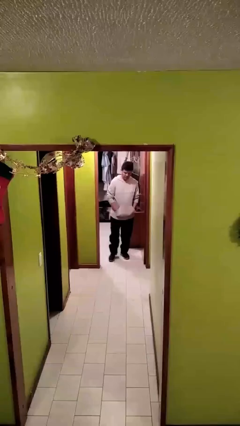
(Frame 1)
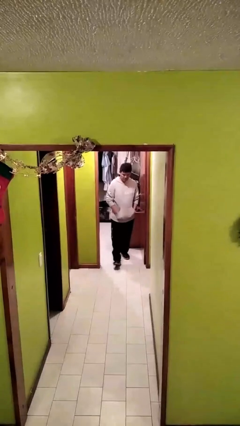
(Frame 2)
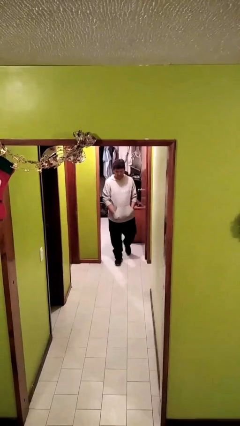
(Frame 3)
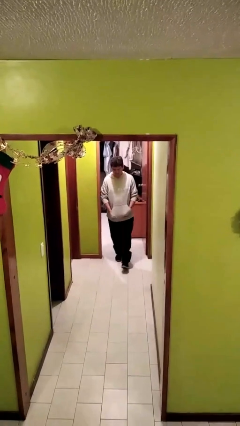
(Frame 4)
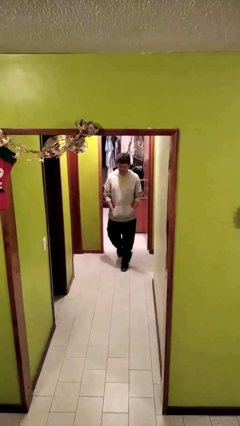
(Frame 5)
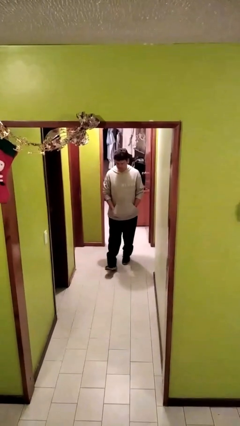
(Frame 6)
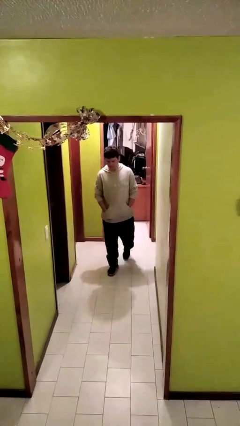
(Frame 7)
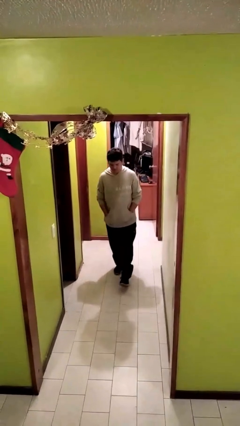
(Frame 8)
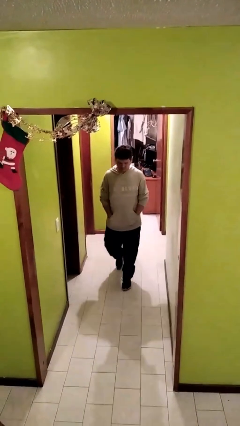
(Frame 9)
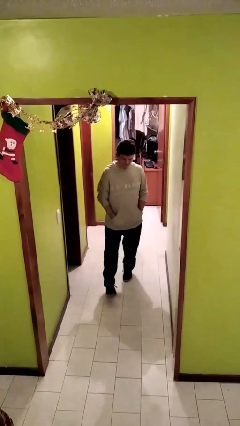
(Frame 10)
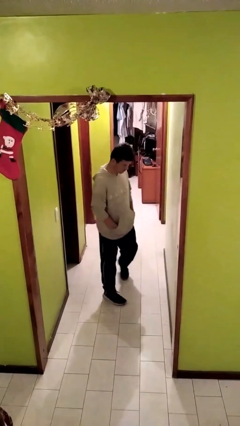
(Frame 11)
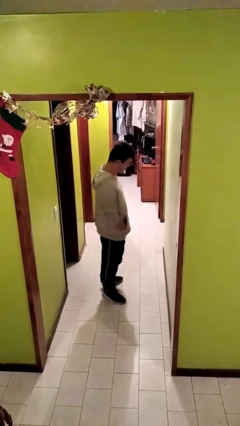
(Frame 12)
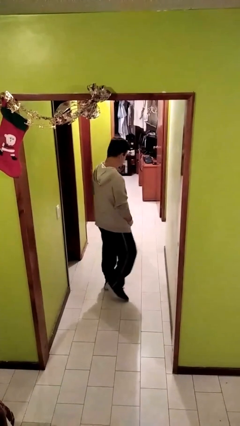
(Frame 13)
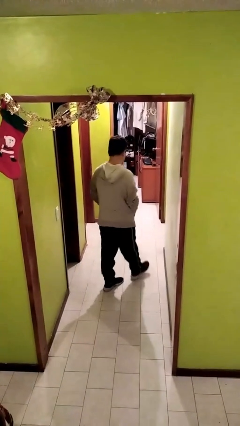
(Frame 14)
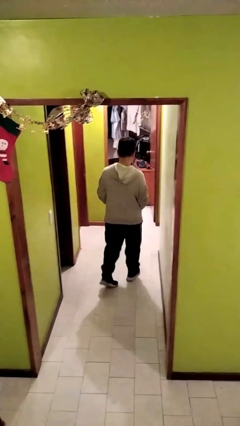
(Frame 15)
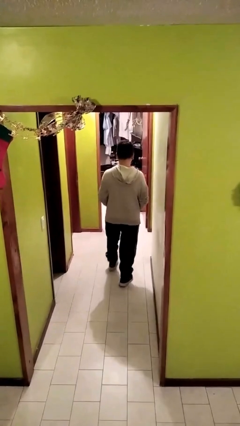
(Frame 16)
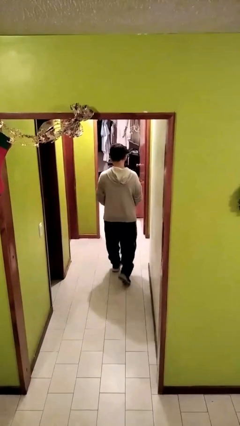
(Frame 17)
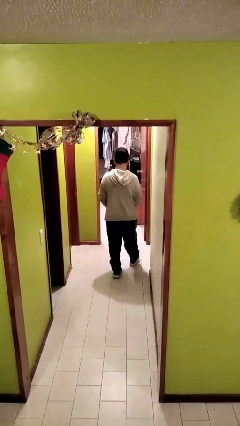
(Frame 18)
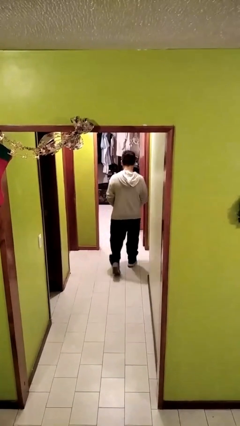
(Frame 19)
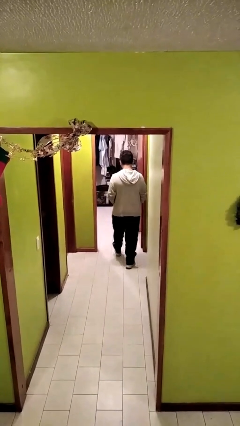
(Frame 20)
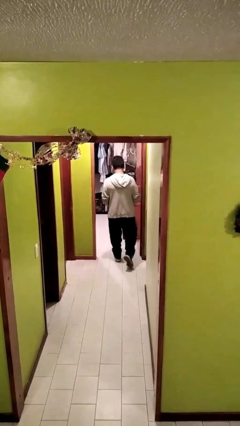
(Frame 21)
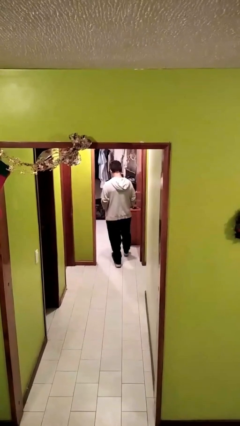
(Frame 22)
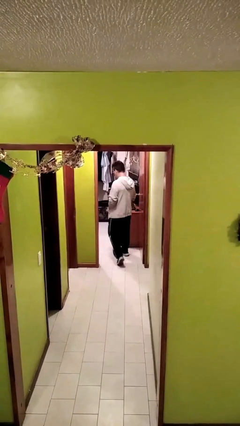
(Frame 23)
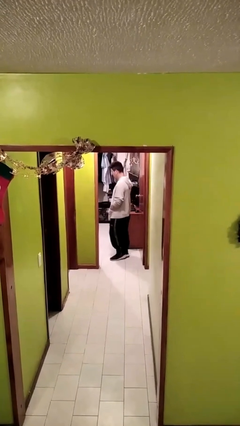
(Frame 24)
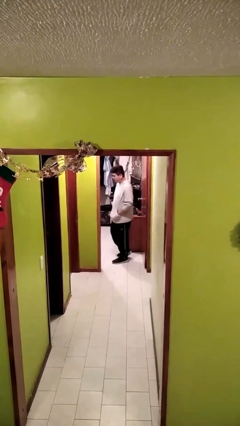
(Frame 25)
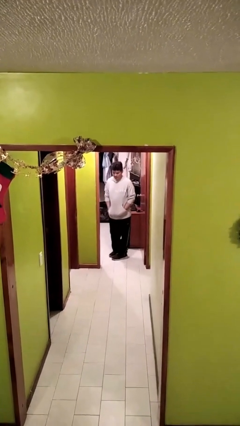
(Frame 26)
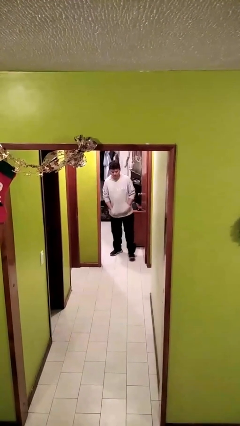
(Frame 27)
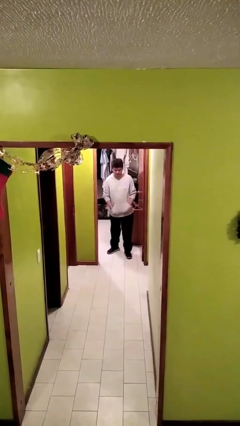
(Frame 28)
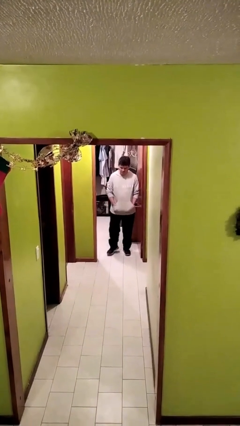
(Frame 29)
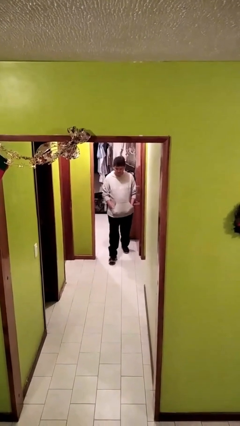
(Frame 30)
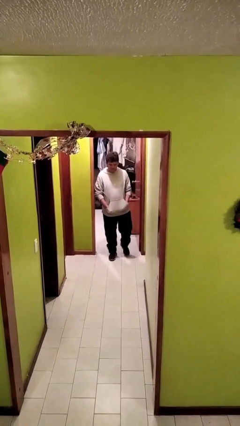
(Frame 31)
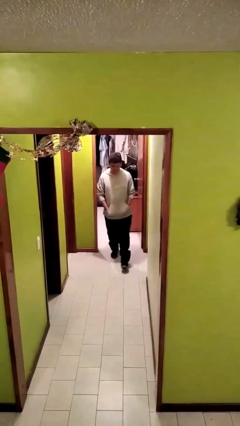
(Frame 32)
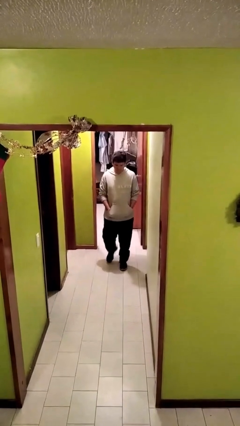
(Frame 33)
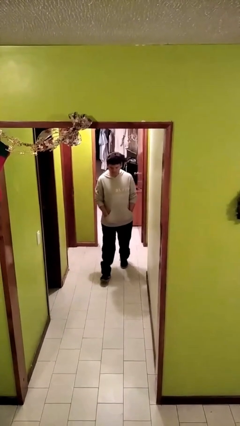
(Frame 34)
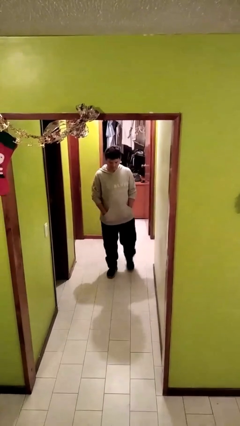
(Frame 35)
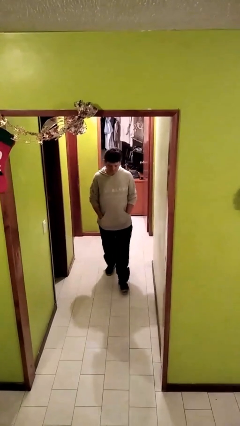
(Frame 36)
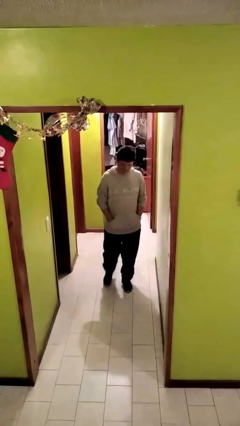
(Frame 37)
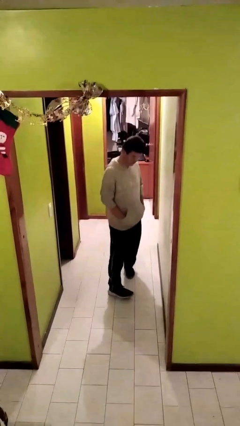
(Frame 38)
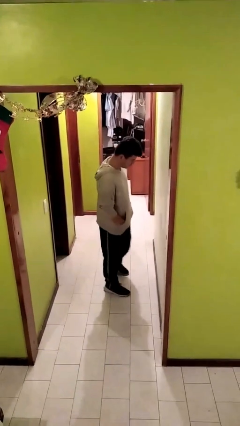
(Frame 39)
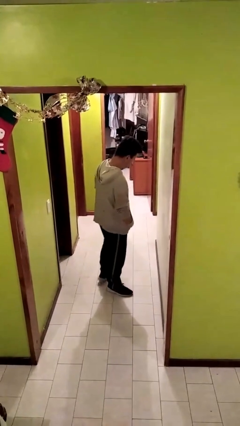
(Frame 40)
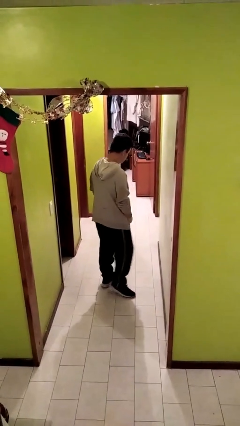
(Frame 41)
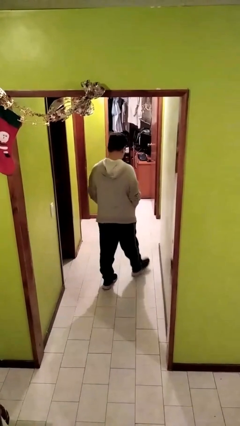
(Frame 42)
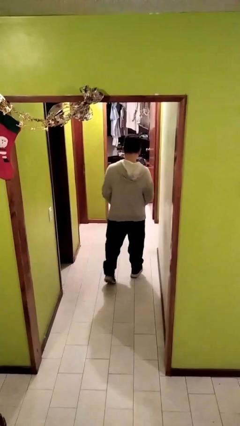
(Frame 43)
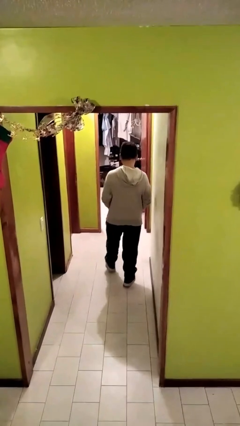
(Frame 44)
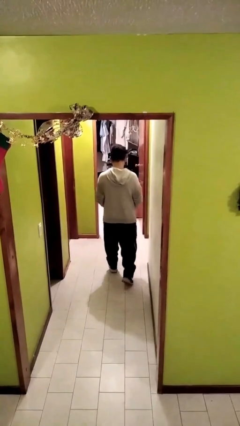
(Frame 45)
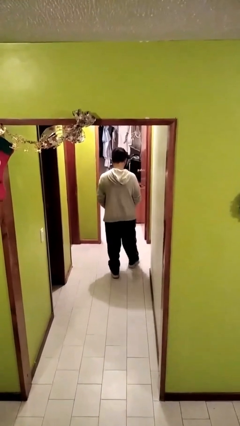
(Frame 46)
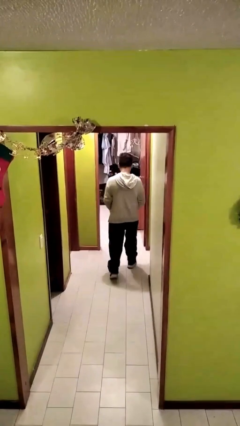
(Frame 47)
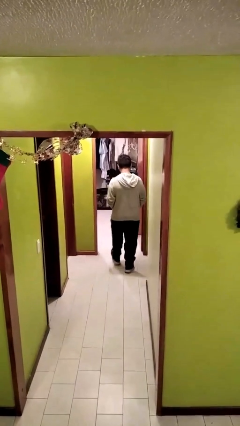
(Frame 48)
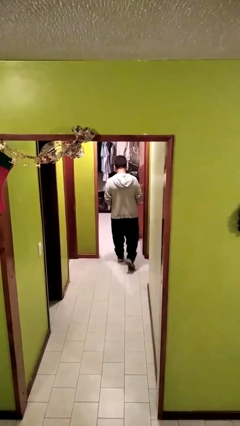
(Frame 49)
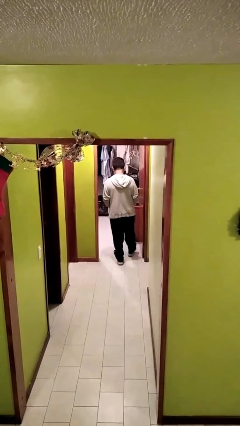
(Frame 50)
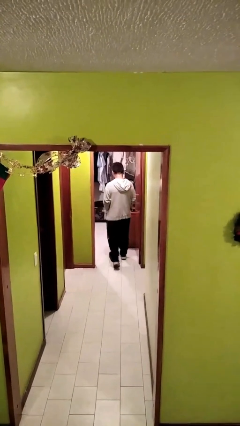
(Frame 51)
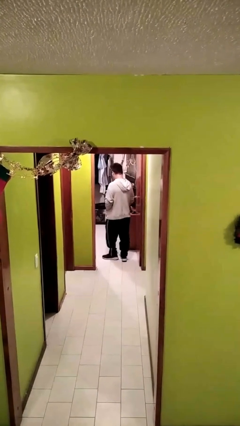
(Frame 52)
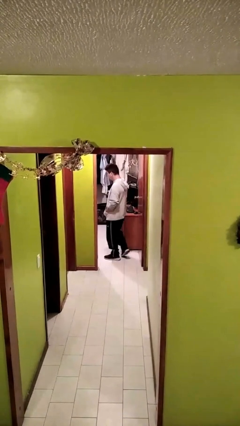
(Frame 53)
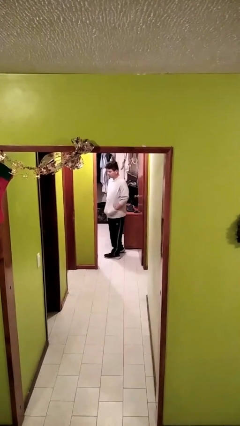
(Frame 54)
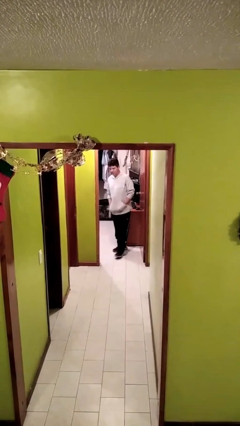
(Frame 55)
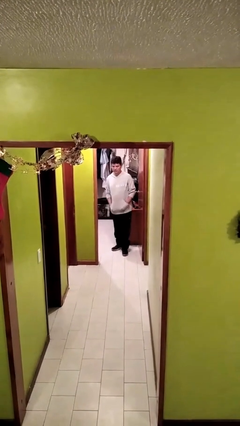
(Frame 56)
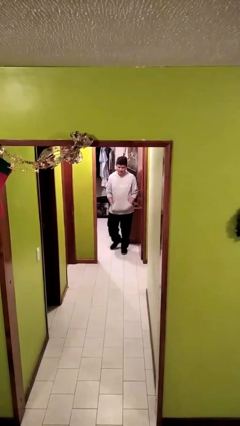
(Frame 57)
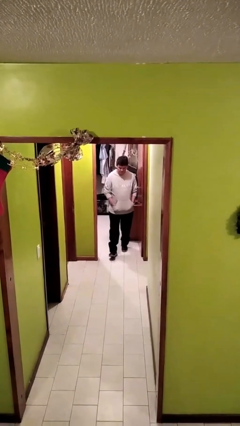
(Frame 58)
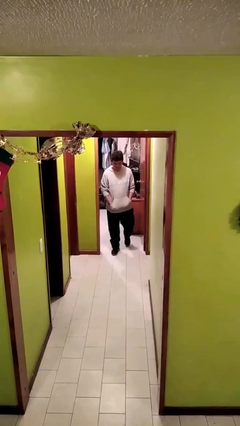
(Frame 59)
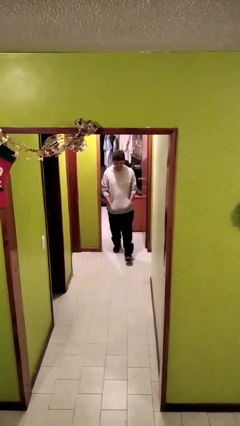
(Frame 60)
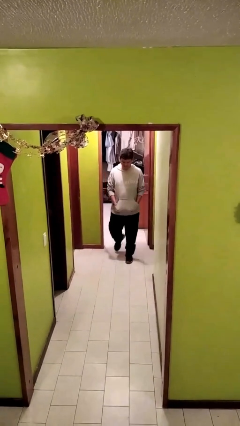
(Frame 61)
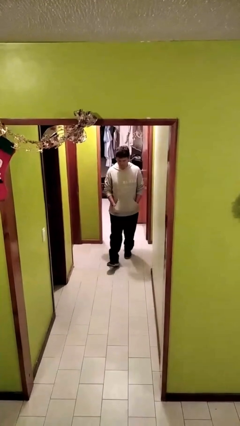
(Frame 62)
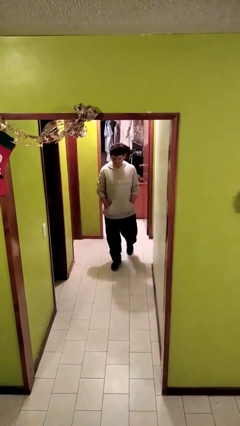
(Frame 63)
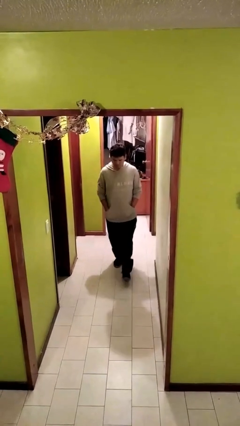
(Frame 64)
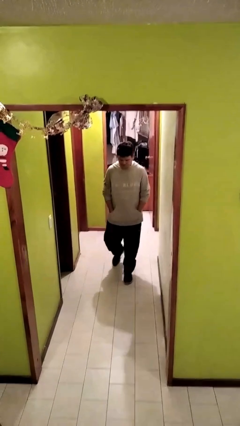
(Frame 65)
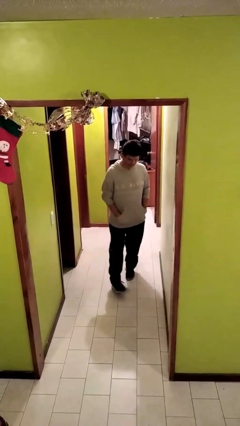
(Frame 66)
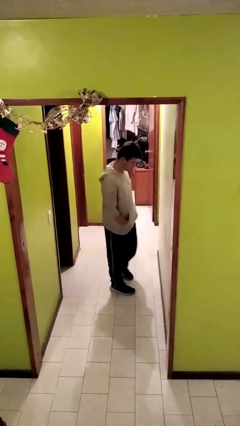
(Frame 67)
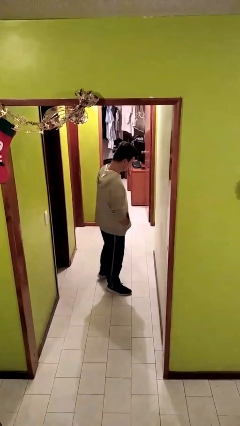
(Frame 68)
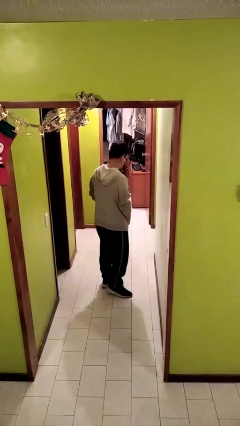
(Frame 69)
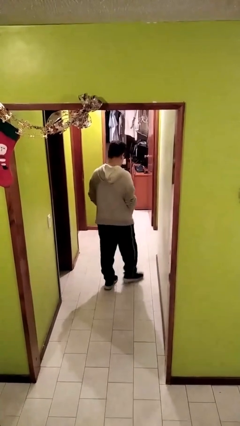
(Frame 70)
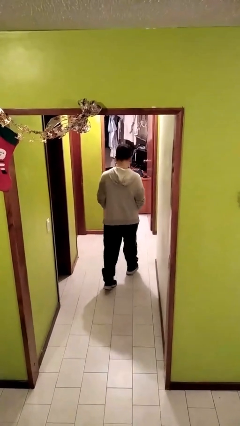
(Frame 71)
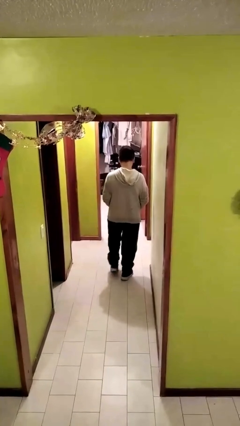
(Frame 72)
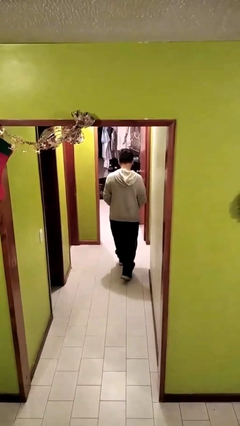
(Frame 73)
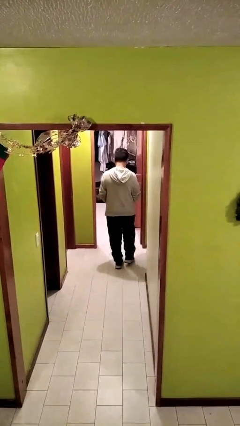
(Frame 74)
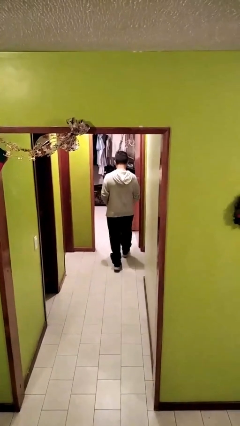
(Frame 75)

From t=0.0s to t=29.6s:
person walks

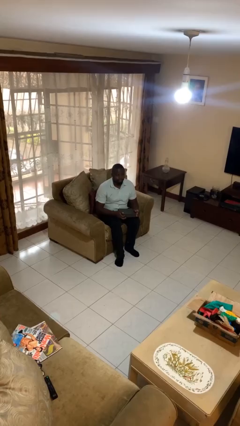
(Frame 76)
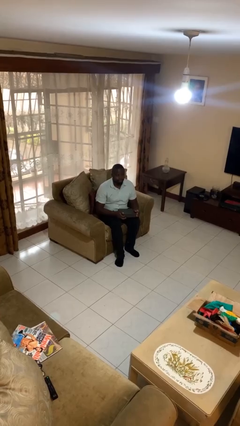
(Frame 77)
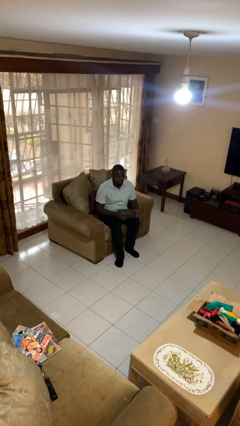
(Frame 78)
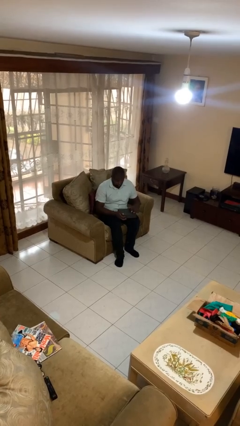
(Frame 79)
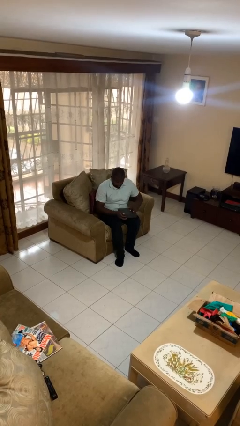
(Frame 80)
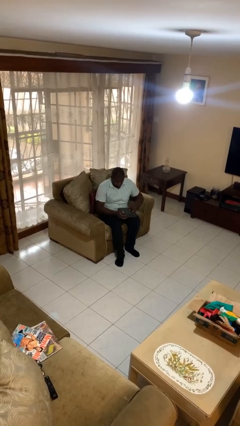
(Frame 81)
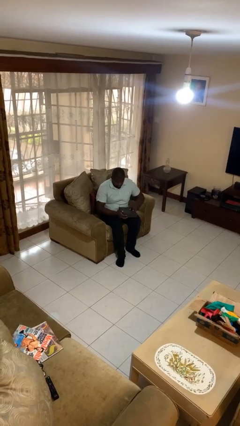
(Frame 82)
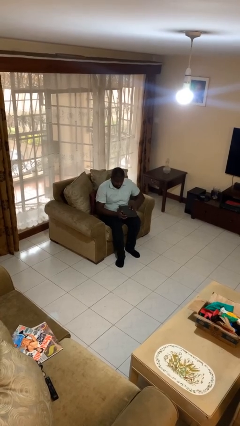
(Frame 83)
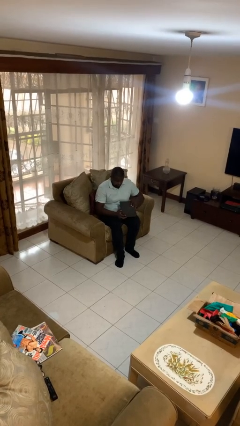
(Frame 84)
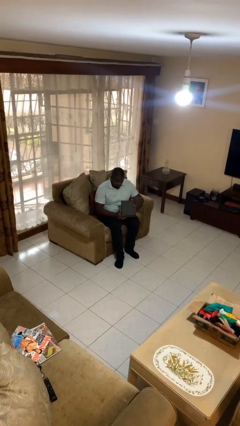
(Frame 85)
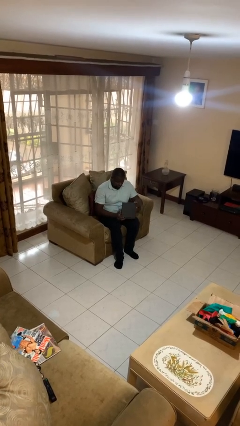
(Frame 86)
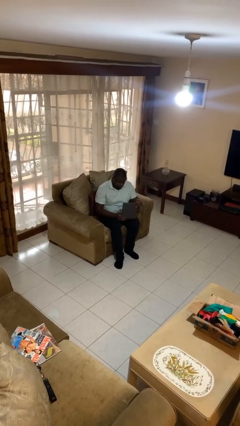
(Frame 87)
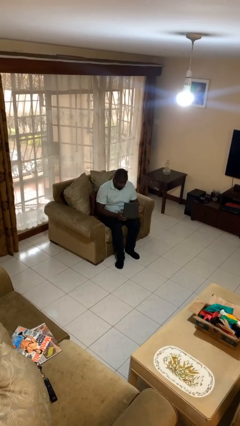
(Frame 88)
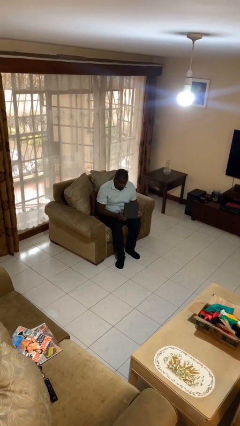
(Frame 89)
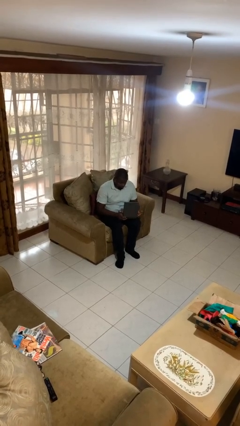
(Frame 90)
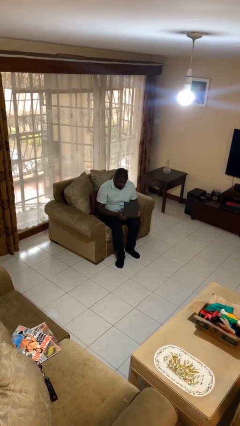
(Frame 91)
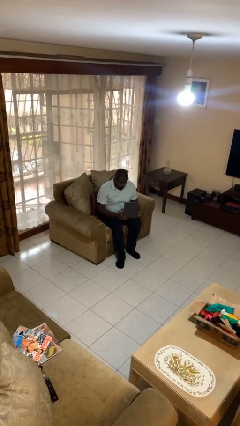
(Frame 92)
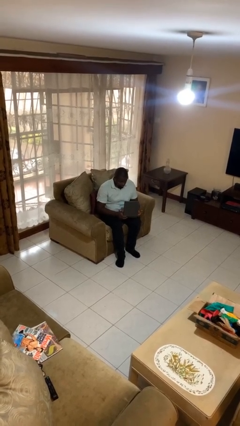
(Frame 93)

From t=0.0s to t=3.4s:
person opens jewelry box
